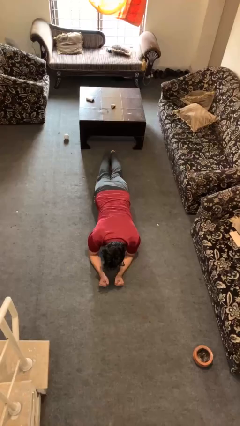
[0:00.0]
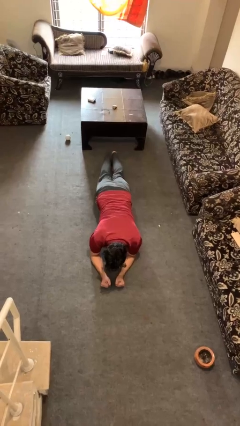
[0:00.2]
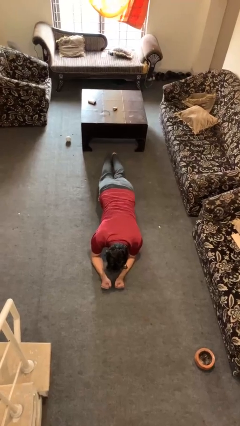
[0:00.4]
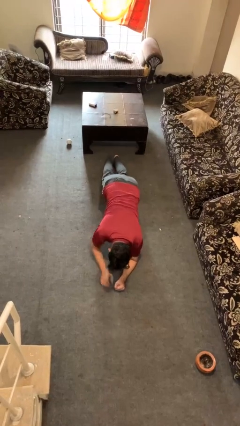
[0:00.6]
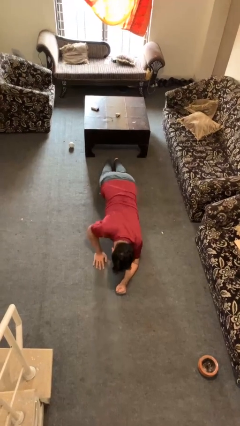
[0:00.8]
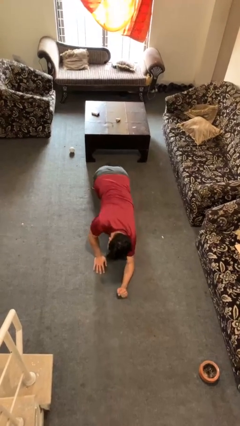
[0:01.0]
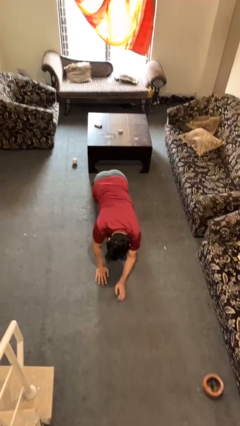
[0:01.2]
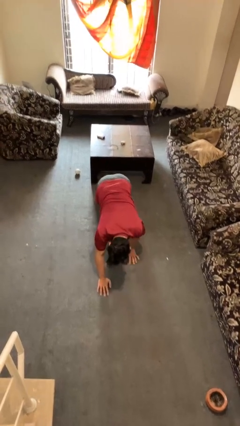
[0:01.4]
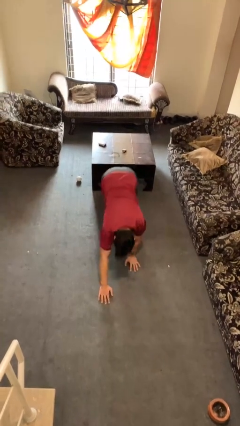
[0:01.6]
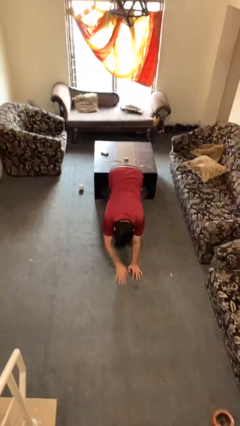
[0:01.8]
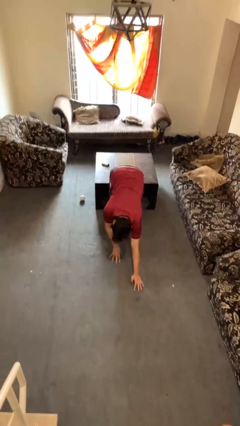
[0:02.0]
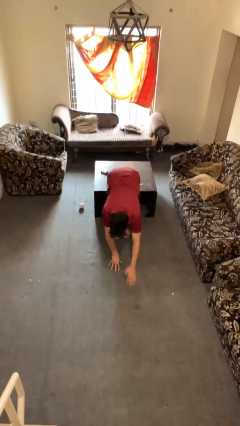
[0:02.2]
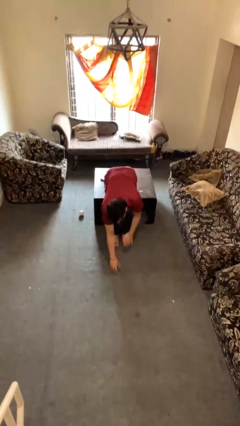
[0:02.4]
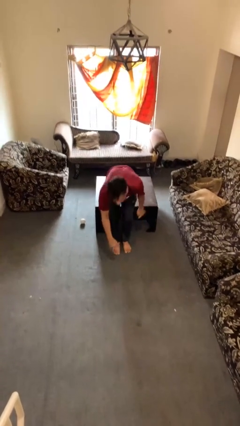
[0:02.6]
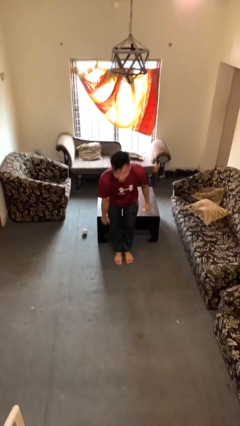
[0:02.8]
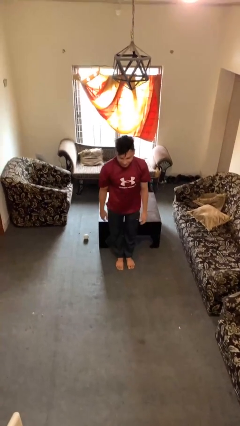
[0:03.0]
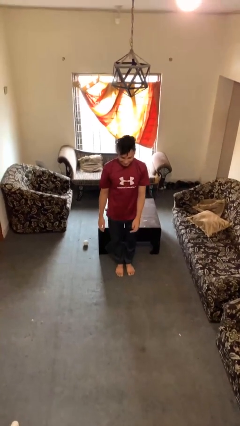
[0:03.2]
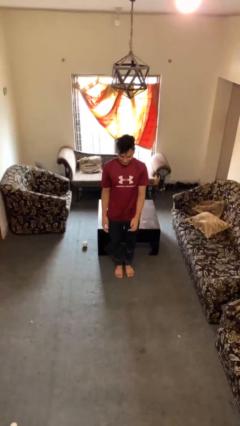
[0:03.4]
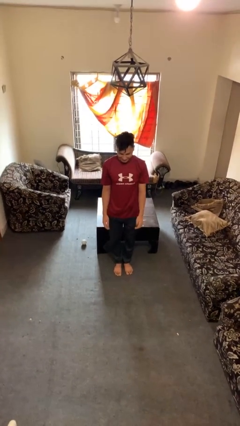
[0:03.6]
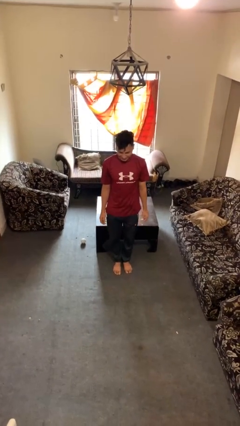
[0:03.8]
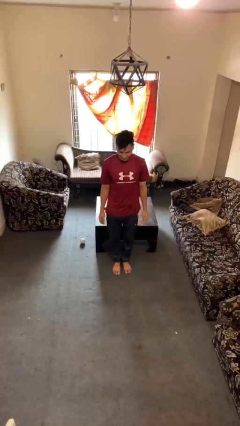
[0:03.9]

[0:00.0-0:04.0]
person stands up from floor

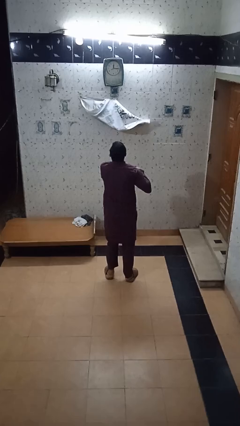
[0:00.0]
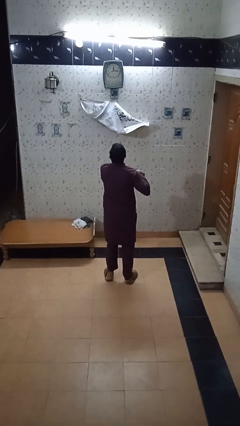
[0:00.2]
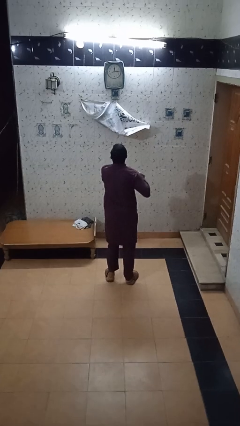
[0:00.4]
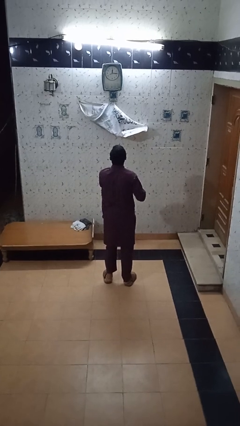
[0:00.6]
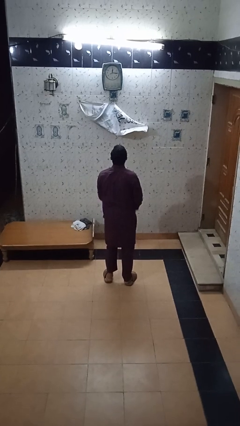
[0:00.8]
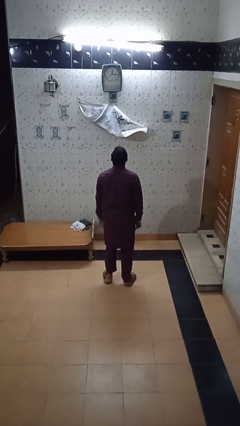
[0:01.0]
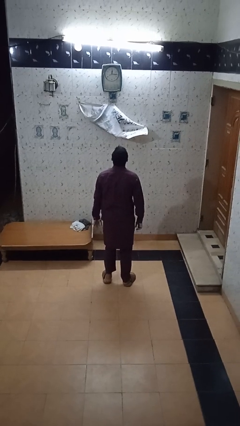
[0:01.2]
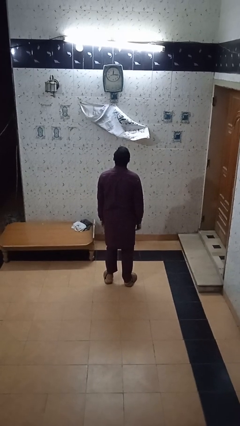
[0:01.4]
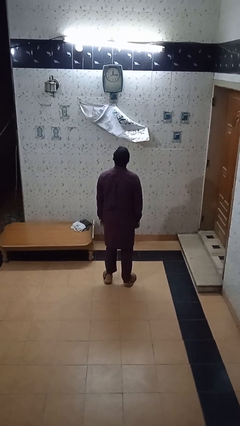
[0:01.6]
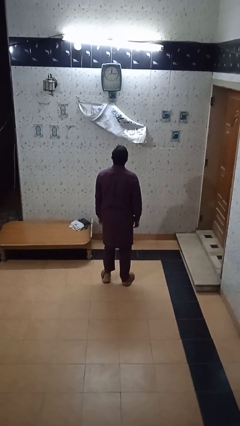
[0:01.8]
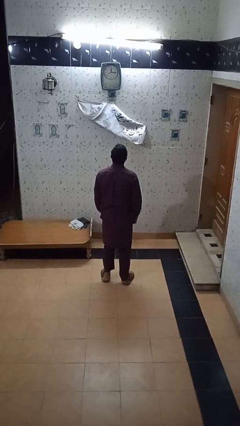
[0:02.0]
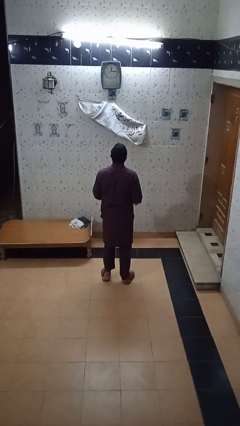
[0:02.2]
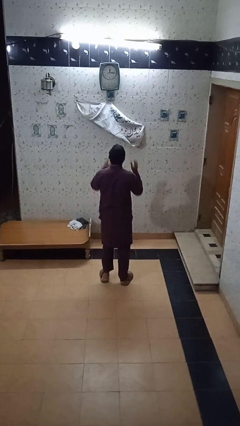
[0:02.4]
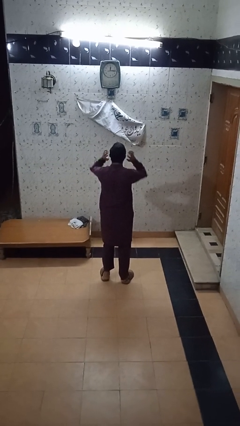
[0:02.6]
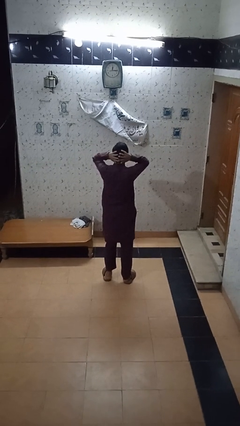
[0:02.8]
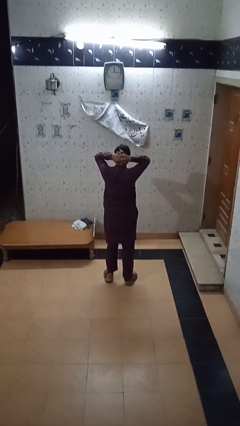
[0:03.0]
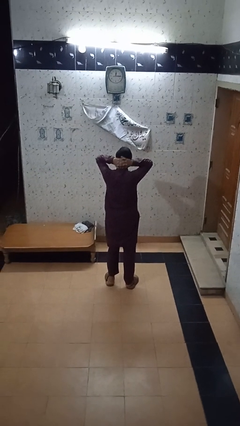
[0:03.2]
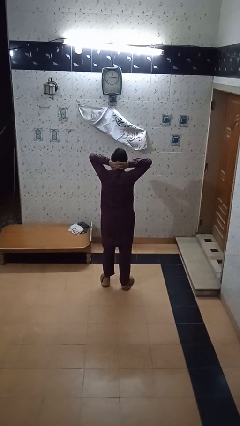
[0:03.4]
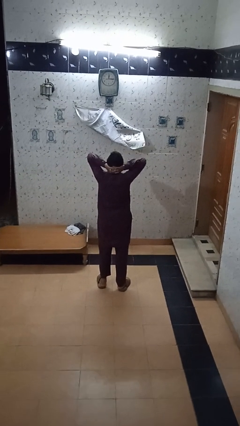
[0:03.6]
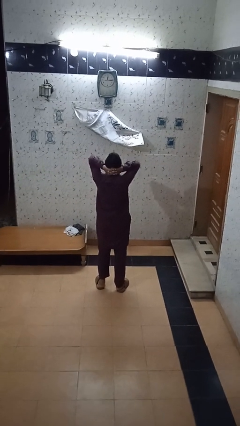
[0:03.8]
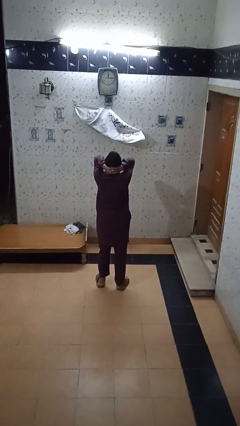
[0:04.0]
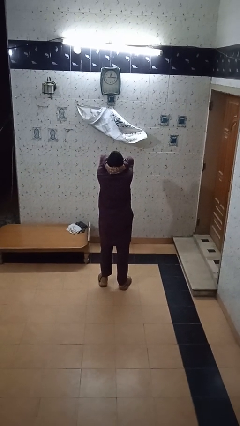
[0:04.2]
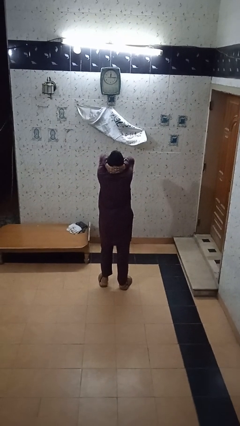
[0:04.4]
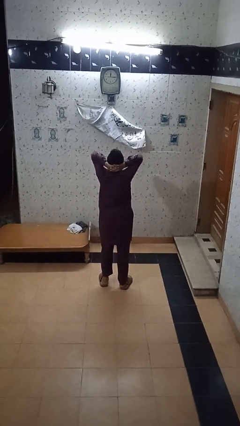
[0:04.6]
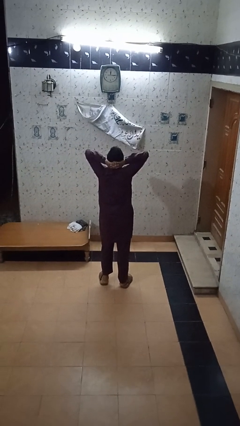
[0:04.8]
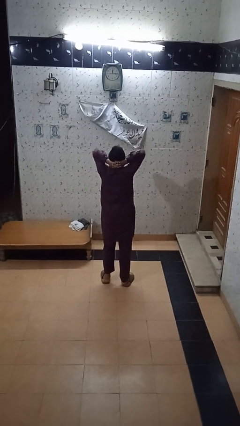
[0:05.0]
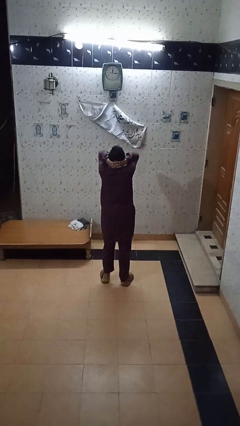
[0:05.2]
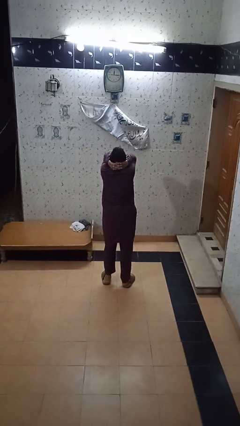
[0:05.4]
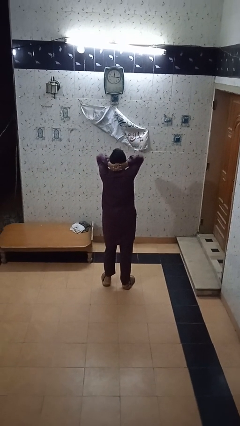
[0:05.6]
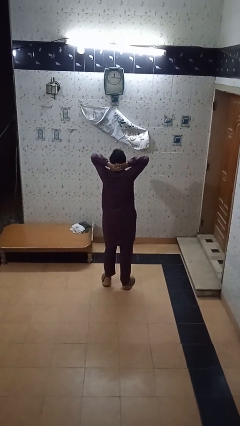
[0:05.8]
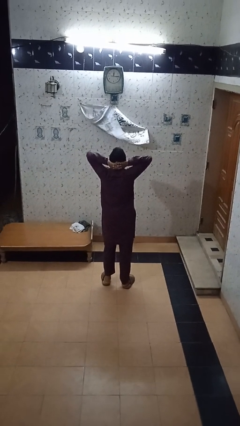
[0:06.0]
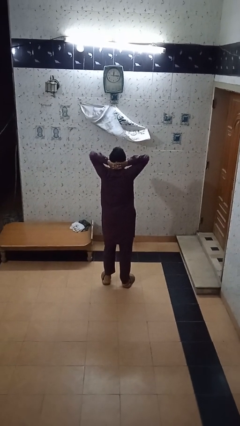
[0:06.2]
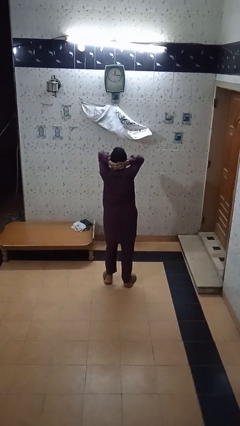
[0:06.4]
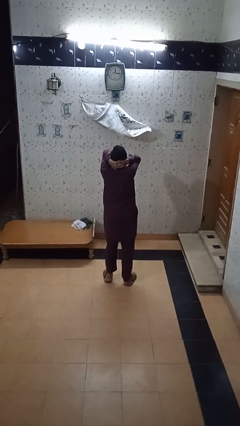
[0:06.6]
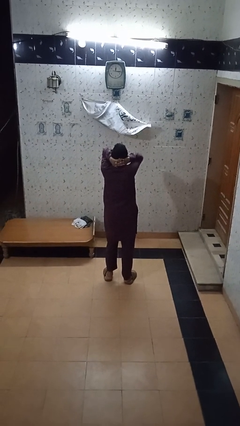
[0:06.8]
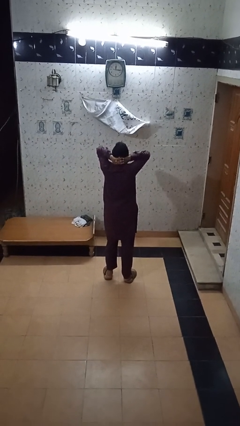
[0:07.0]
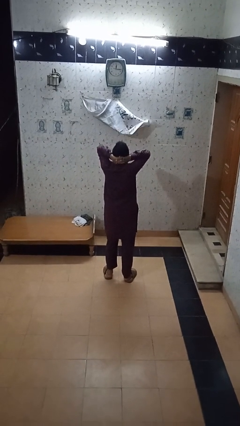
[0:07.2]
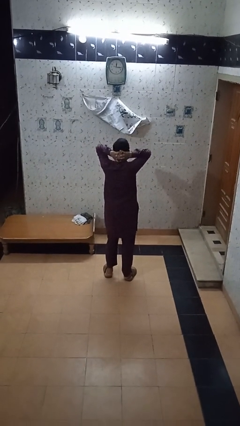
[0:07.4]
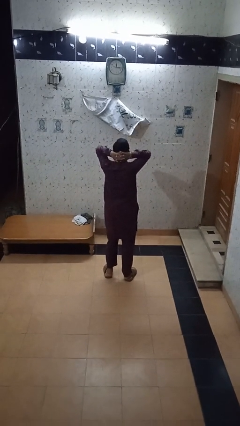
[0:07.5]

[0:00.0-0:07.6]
person stretches arms over head

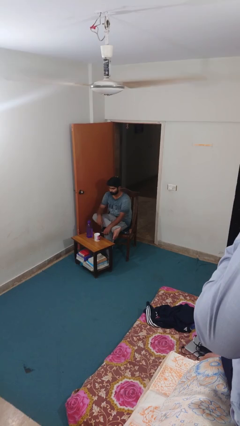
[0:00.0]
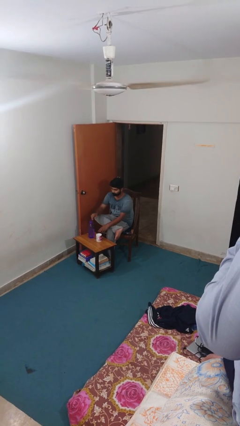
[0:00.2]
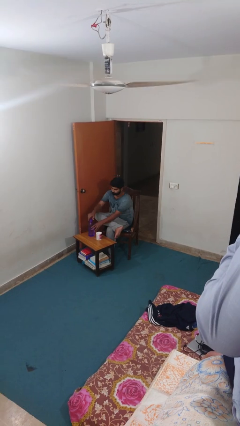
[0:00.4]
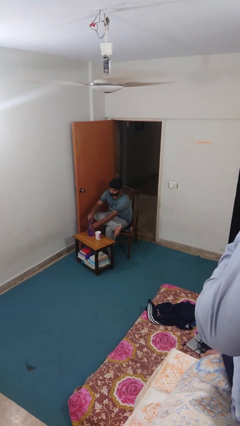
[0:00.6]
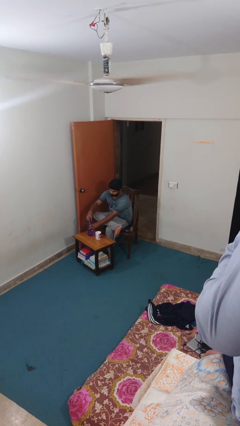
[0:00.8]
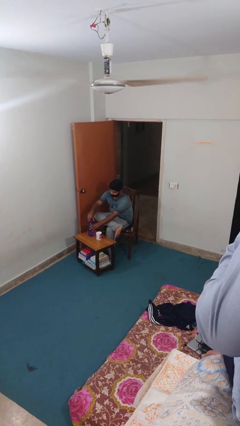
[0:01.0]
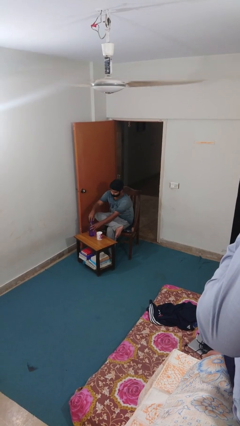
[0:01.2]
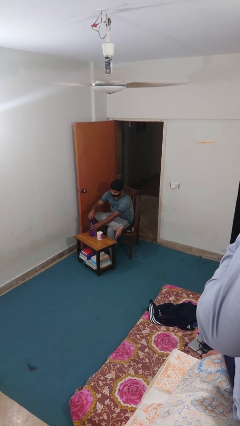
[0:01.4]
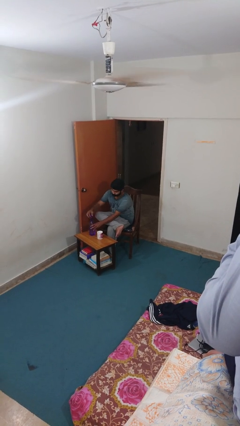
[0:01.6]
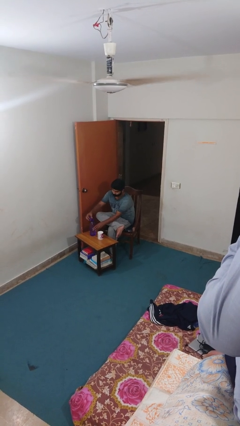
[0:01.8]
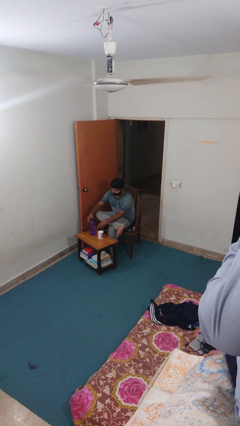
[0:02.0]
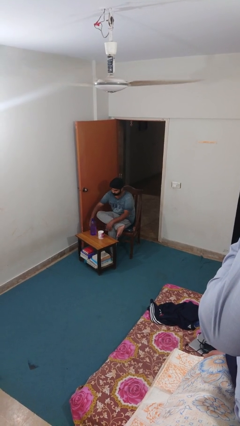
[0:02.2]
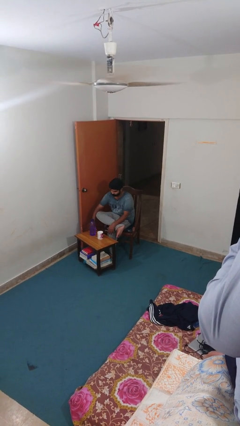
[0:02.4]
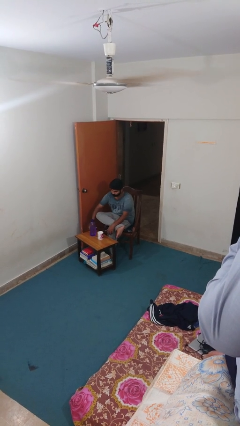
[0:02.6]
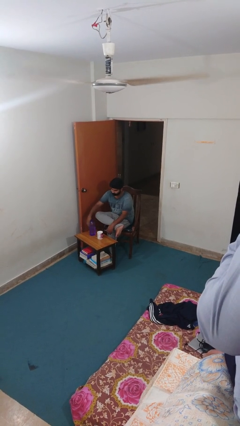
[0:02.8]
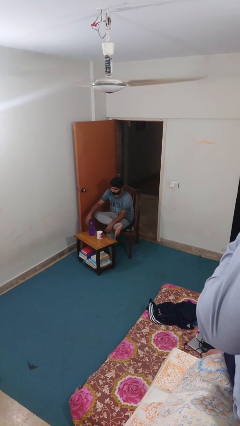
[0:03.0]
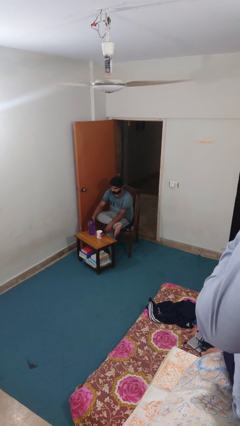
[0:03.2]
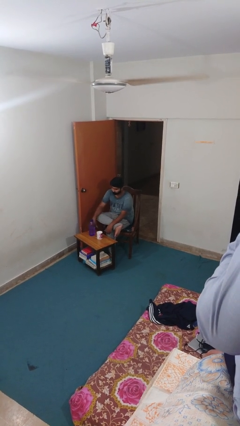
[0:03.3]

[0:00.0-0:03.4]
person unscrews lid from bottle

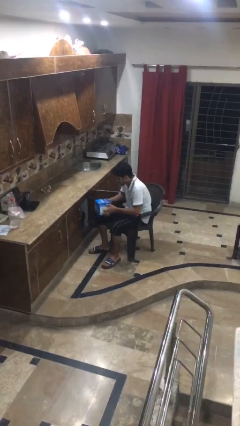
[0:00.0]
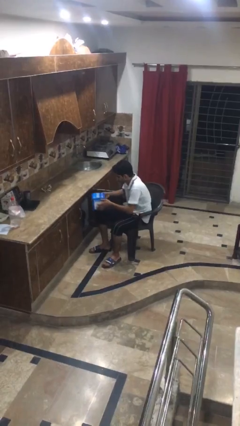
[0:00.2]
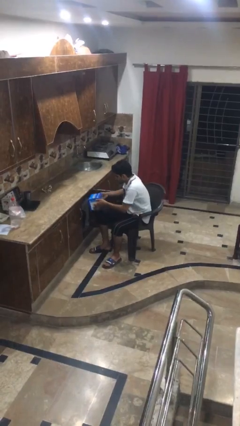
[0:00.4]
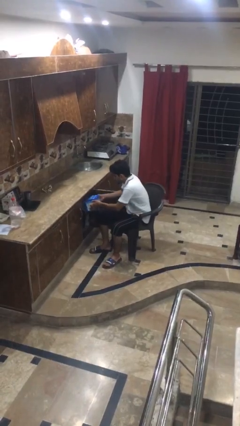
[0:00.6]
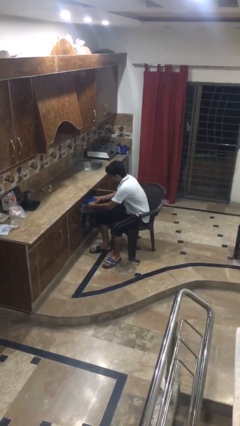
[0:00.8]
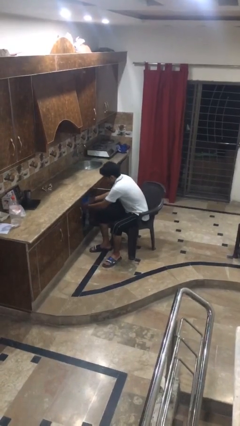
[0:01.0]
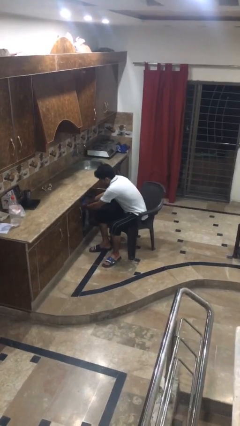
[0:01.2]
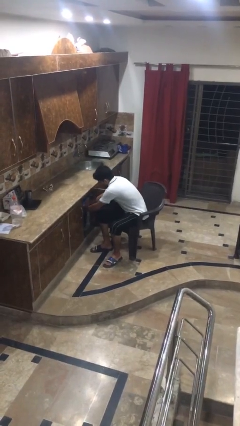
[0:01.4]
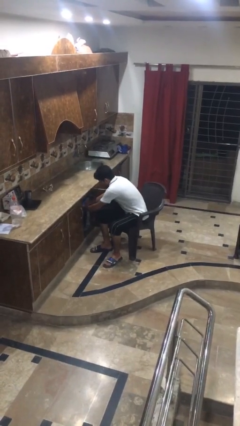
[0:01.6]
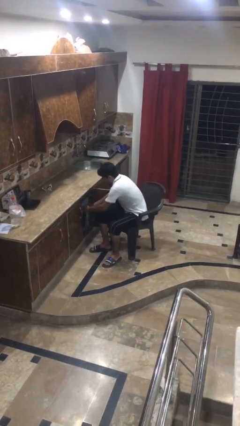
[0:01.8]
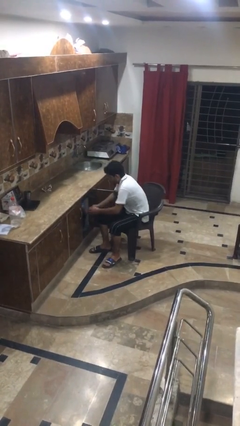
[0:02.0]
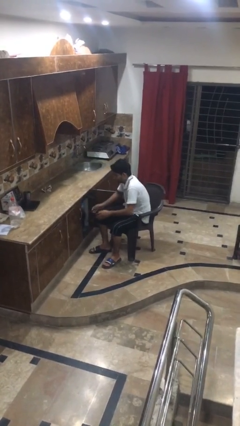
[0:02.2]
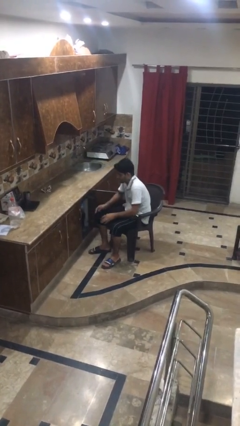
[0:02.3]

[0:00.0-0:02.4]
person puts down object into cabinet
